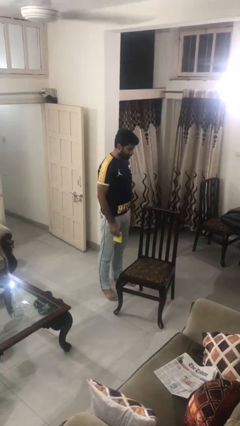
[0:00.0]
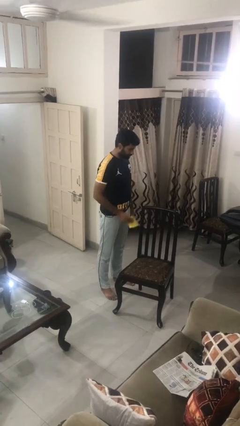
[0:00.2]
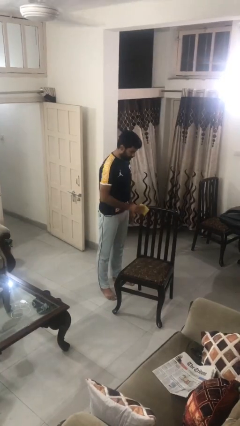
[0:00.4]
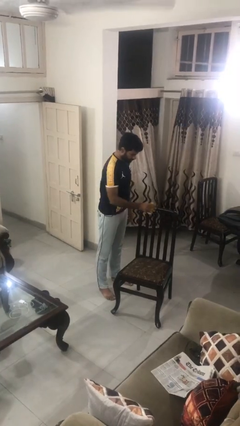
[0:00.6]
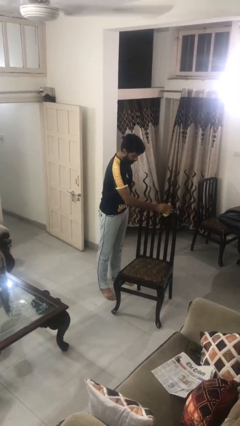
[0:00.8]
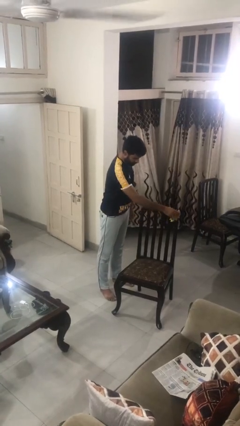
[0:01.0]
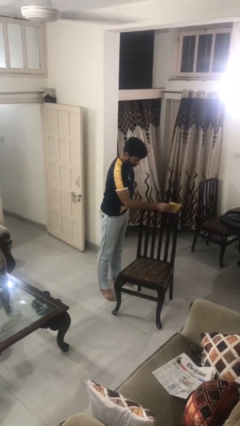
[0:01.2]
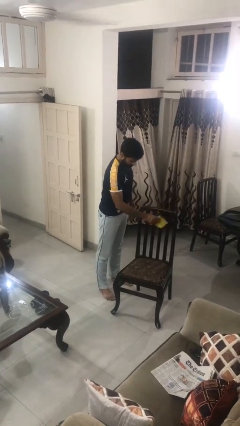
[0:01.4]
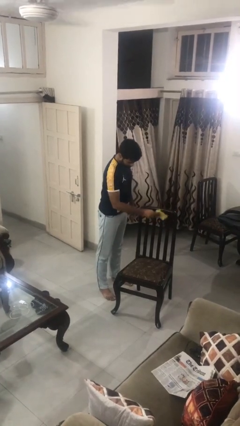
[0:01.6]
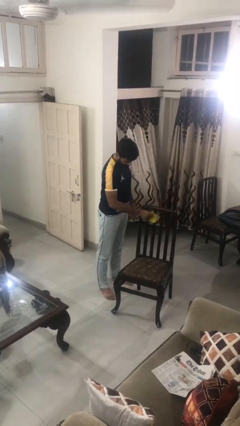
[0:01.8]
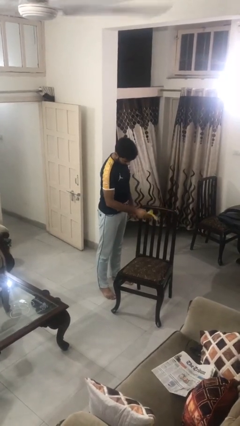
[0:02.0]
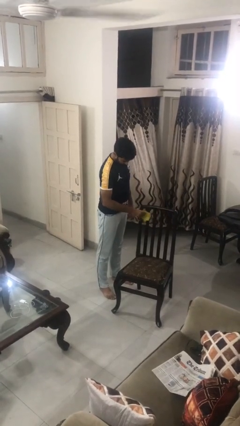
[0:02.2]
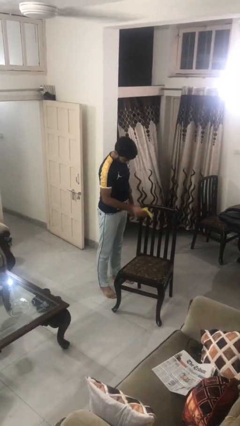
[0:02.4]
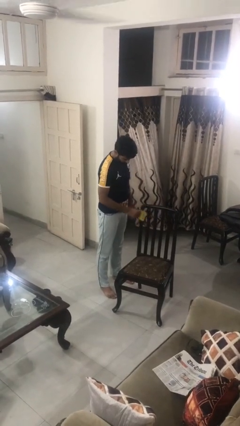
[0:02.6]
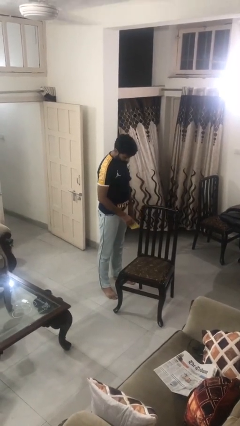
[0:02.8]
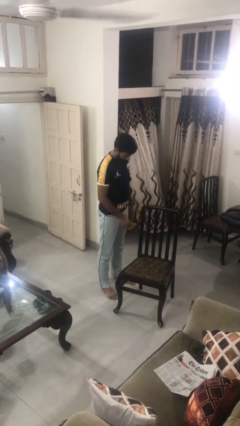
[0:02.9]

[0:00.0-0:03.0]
person dusts furniture

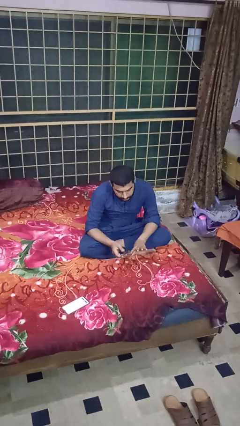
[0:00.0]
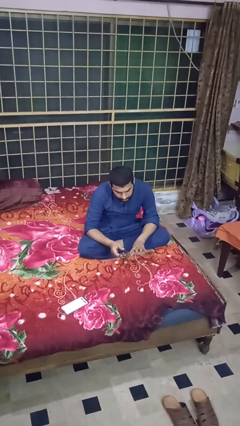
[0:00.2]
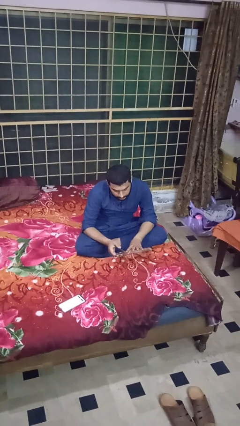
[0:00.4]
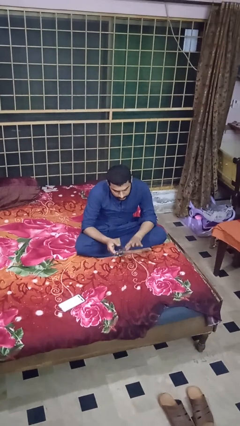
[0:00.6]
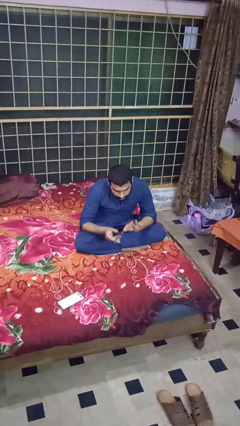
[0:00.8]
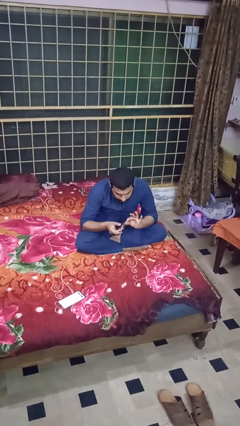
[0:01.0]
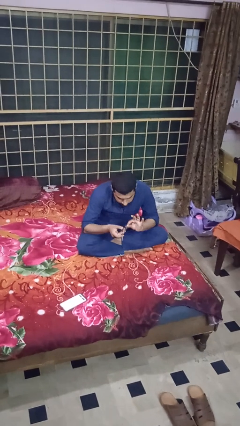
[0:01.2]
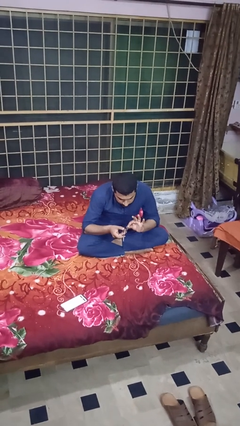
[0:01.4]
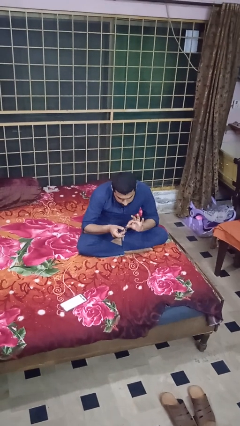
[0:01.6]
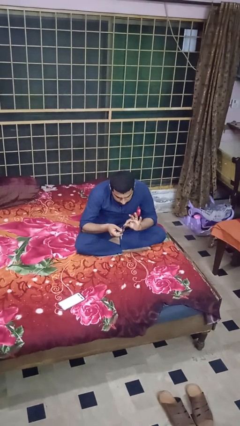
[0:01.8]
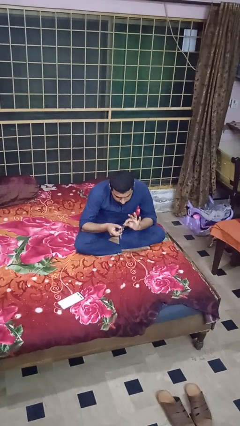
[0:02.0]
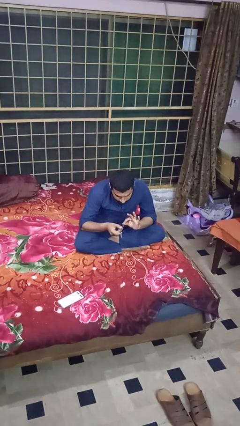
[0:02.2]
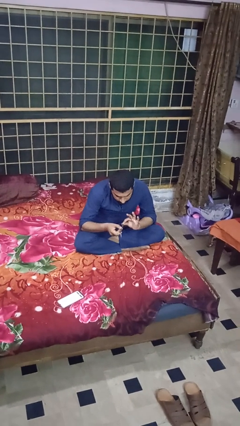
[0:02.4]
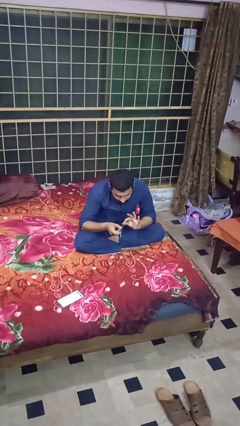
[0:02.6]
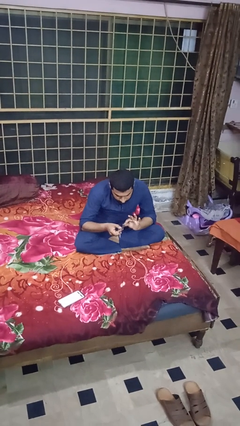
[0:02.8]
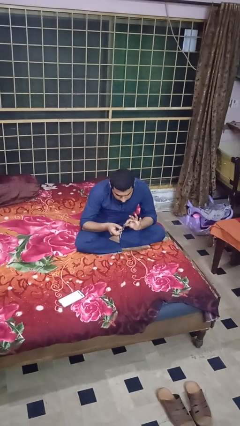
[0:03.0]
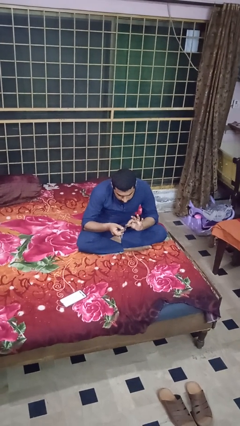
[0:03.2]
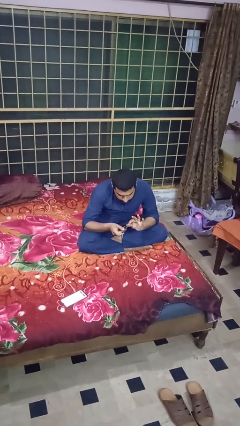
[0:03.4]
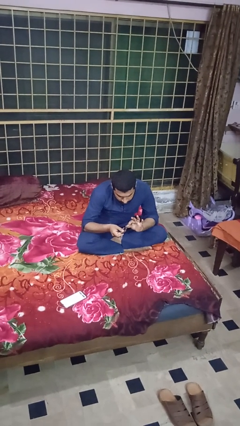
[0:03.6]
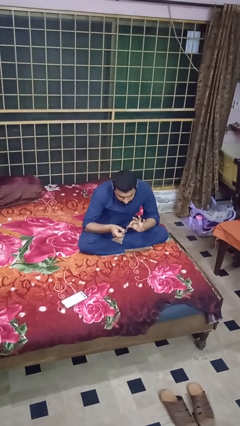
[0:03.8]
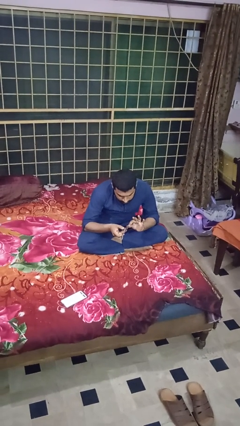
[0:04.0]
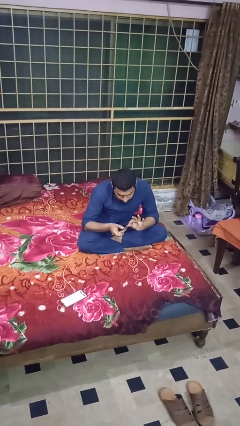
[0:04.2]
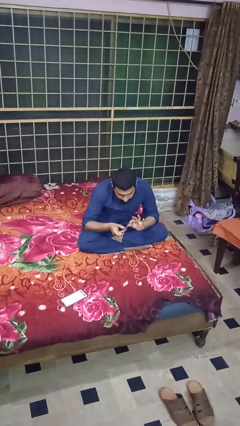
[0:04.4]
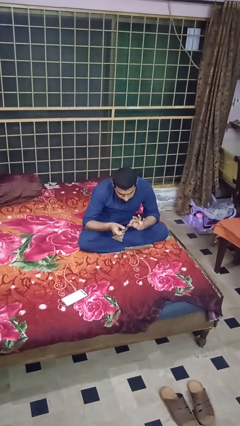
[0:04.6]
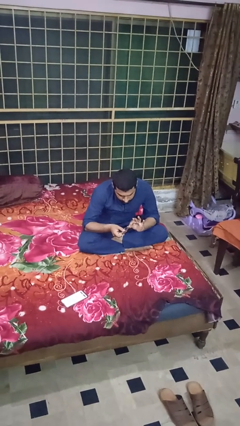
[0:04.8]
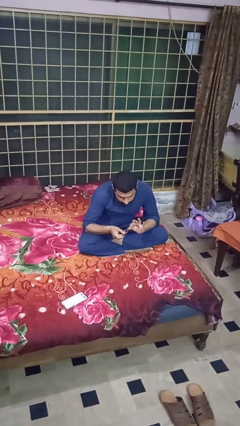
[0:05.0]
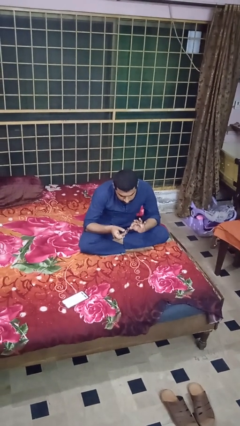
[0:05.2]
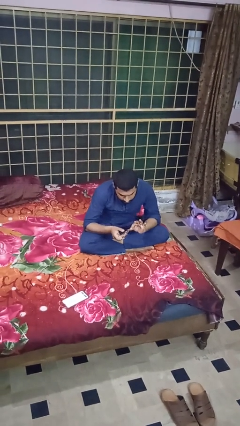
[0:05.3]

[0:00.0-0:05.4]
person clips fingernails

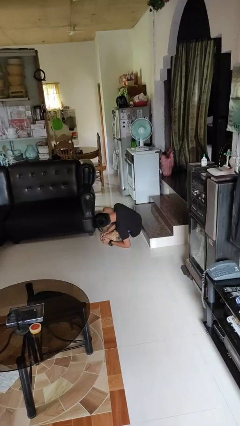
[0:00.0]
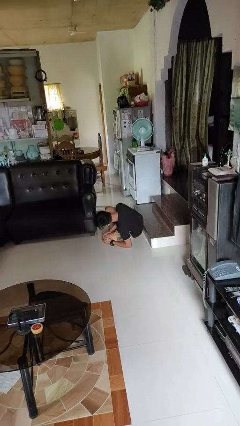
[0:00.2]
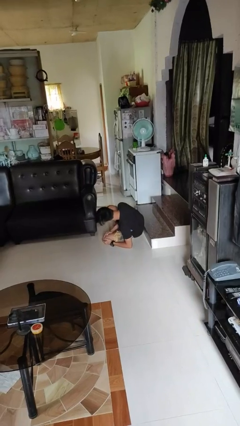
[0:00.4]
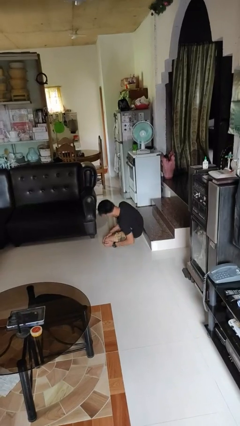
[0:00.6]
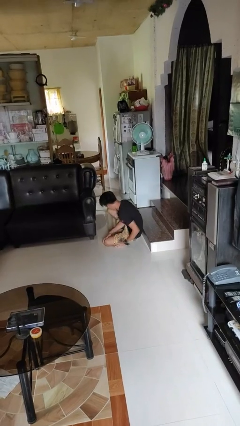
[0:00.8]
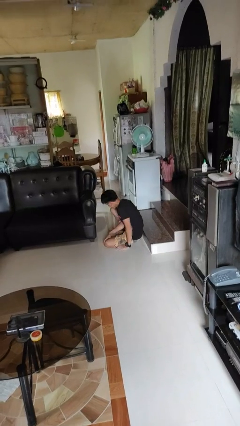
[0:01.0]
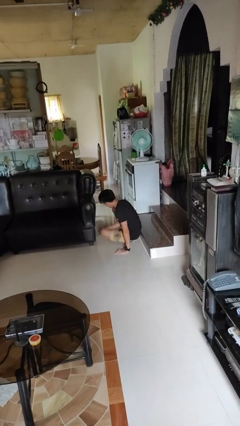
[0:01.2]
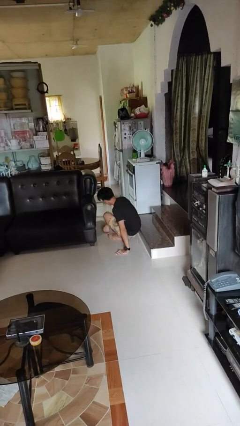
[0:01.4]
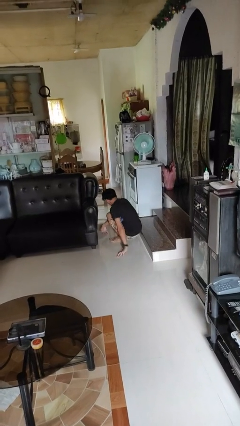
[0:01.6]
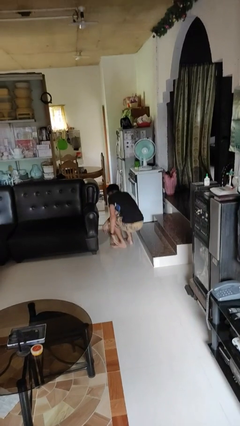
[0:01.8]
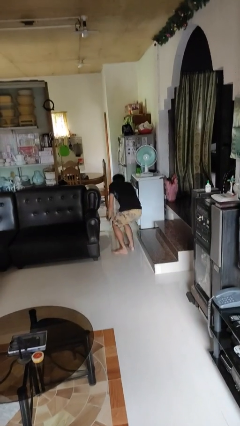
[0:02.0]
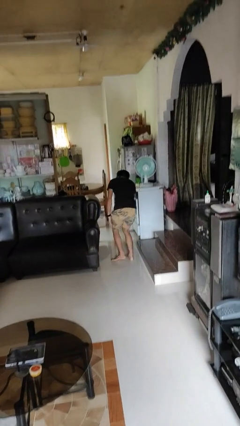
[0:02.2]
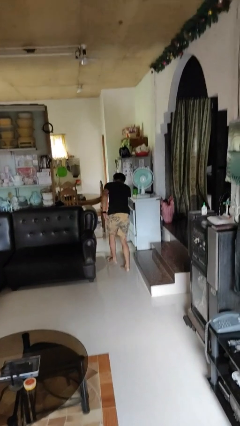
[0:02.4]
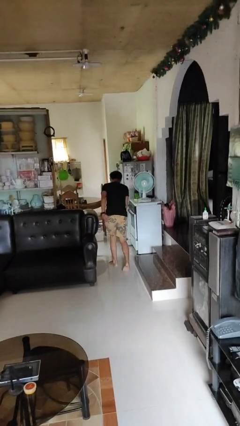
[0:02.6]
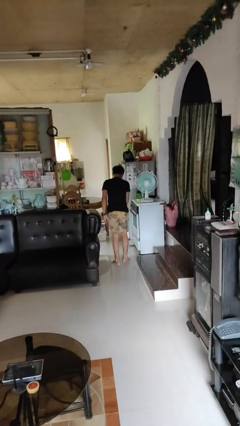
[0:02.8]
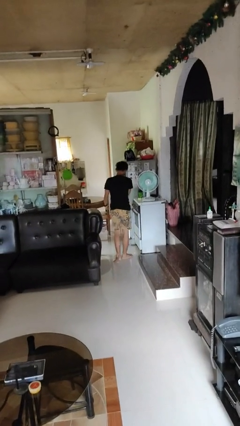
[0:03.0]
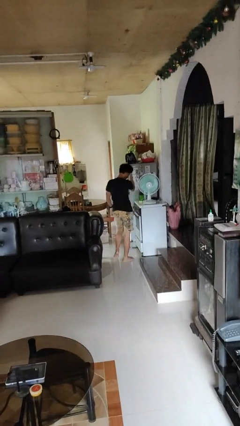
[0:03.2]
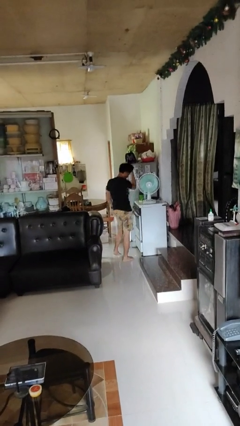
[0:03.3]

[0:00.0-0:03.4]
person stands up from floor

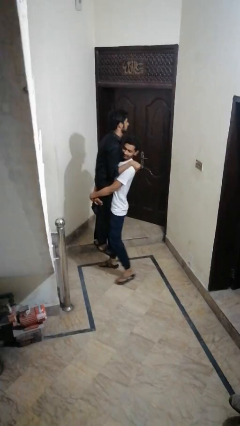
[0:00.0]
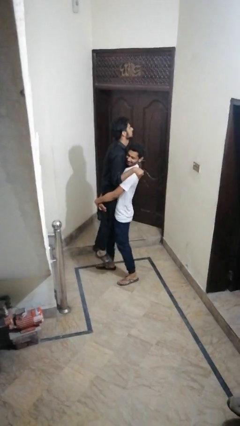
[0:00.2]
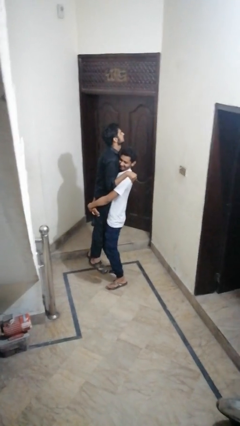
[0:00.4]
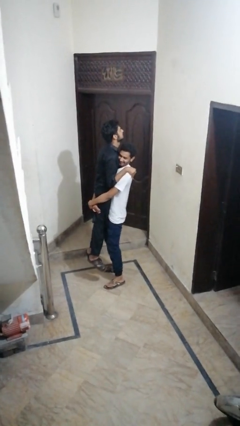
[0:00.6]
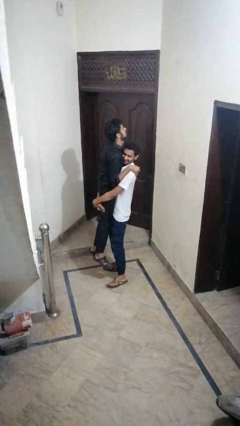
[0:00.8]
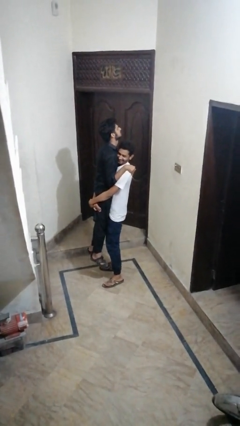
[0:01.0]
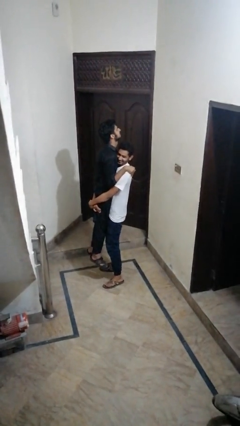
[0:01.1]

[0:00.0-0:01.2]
person takes off facemask

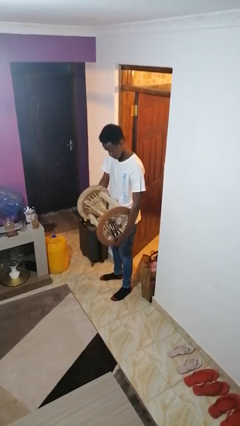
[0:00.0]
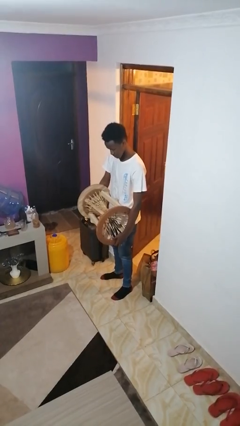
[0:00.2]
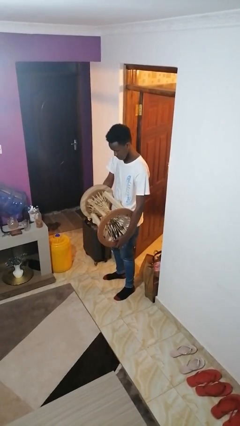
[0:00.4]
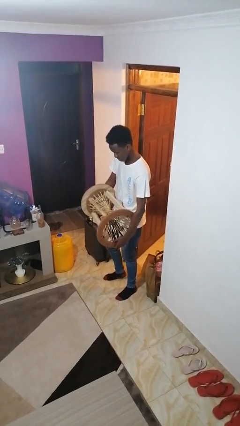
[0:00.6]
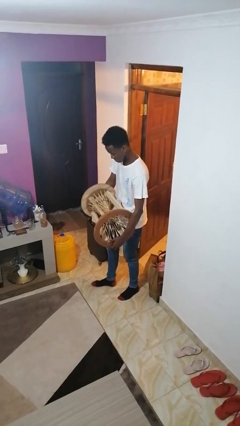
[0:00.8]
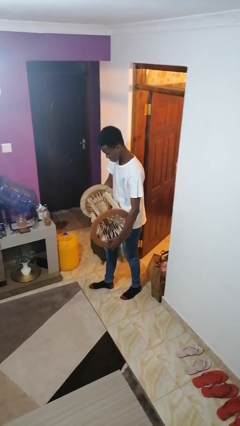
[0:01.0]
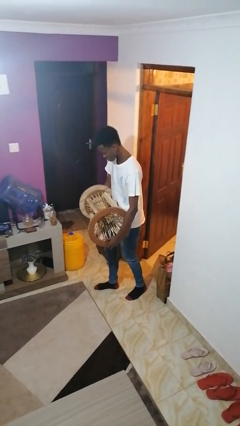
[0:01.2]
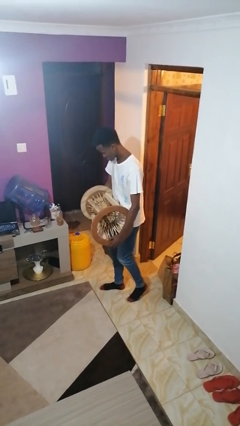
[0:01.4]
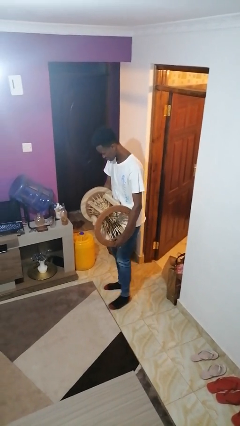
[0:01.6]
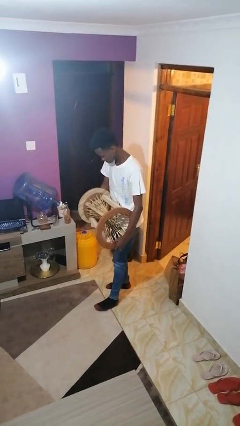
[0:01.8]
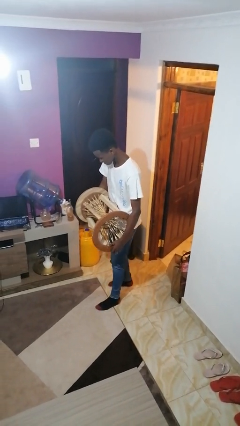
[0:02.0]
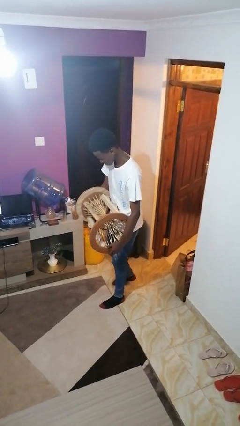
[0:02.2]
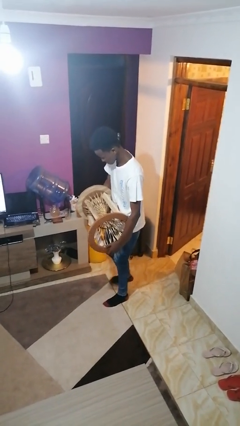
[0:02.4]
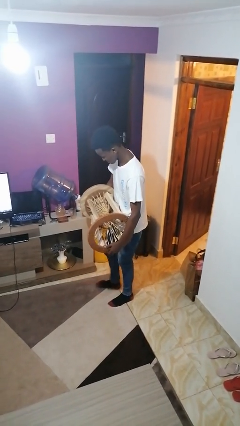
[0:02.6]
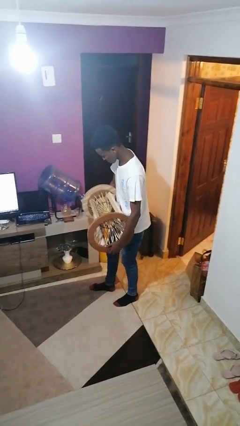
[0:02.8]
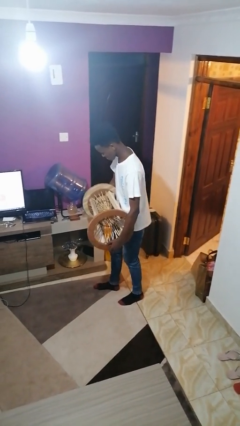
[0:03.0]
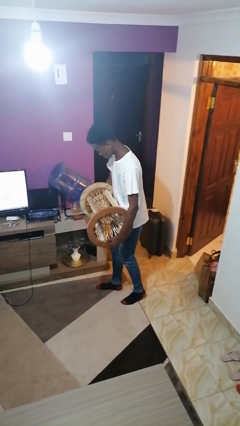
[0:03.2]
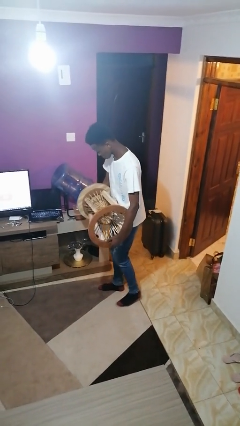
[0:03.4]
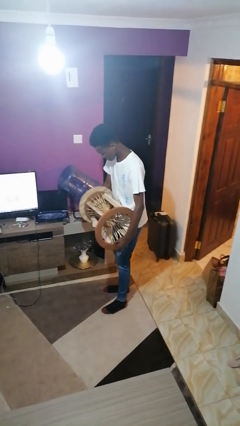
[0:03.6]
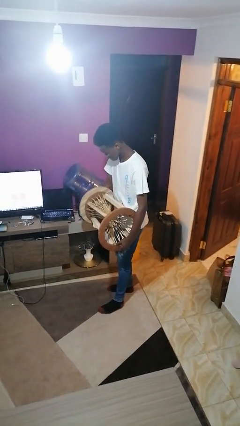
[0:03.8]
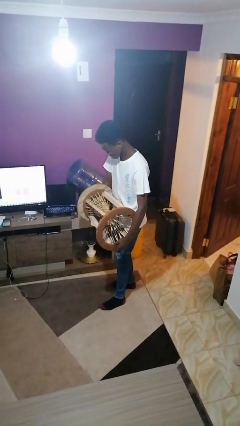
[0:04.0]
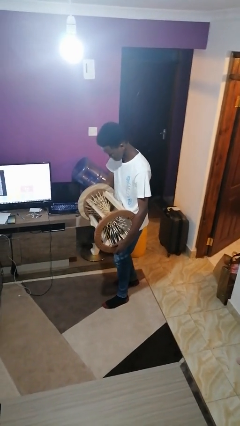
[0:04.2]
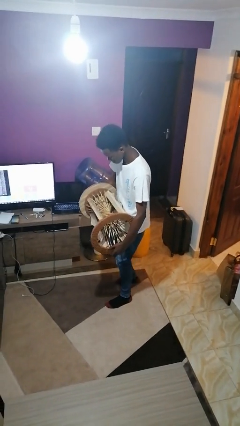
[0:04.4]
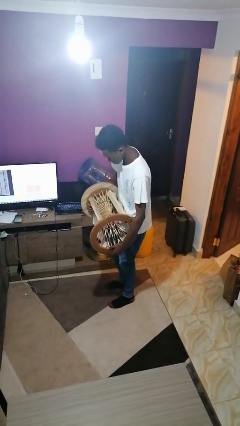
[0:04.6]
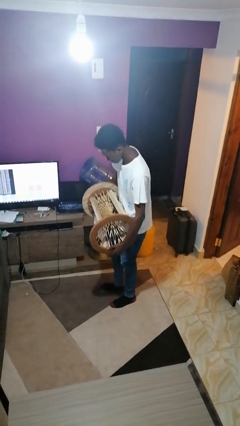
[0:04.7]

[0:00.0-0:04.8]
person carries furniture
